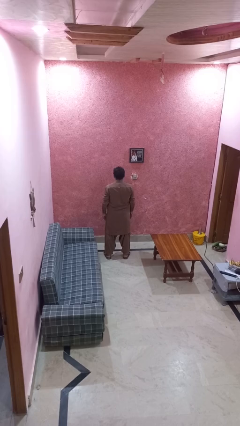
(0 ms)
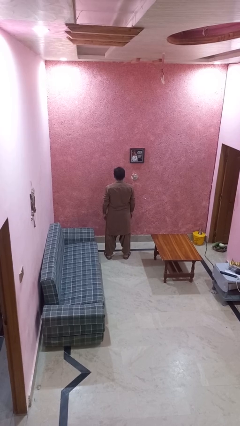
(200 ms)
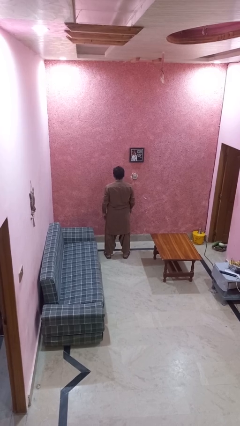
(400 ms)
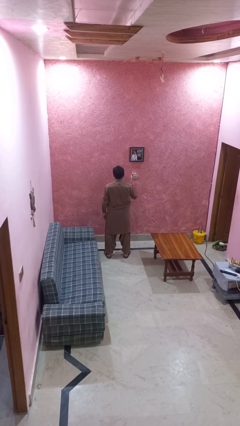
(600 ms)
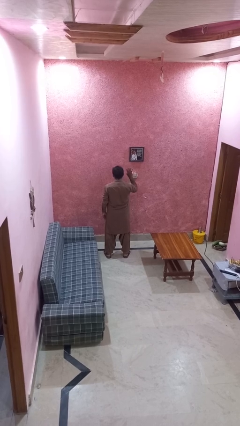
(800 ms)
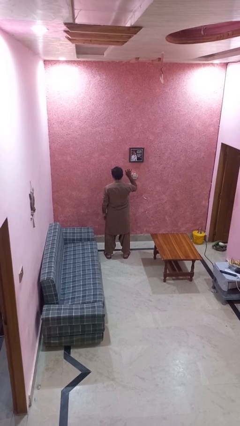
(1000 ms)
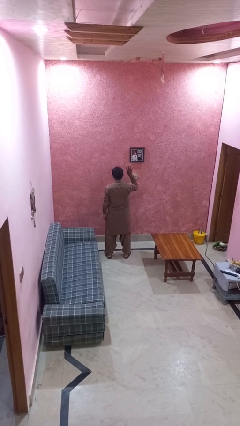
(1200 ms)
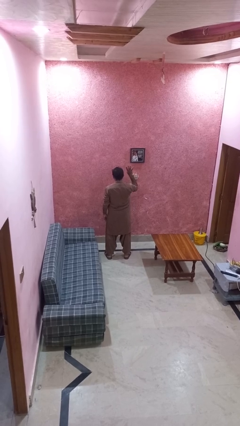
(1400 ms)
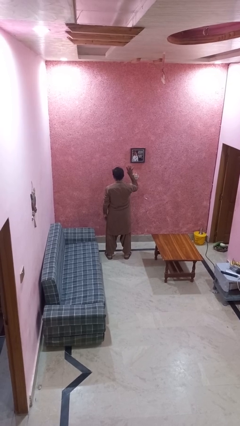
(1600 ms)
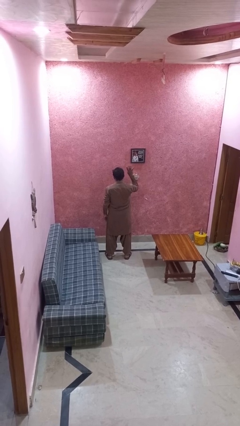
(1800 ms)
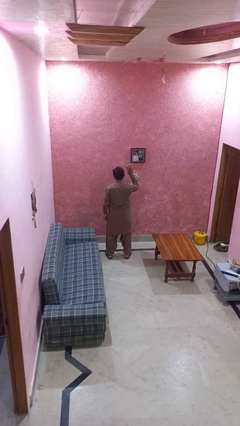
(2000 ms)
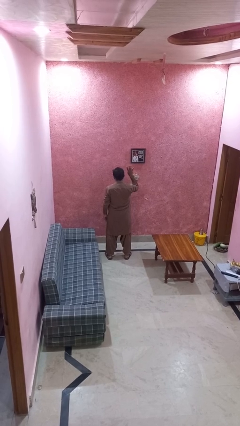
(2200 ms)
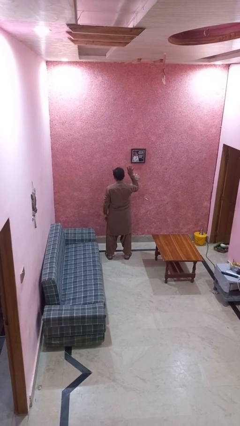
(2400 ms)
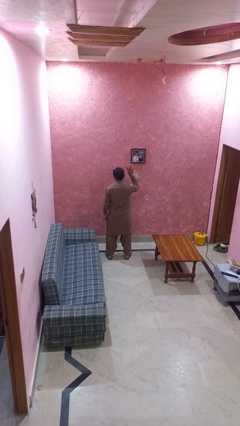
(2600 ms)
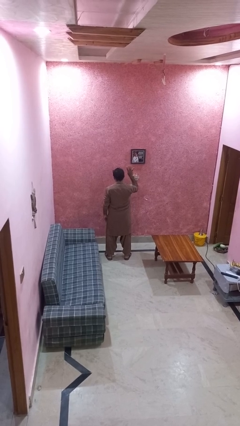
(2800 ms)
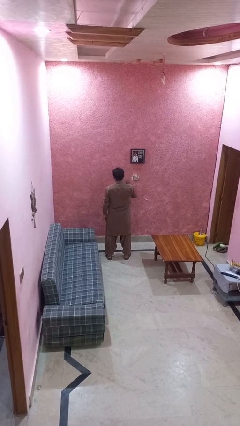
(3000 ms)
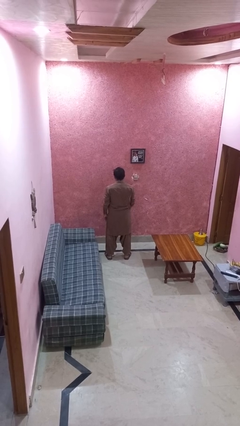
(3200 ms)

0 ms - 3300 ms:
person gestures number four

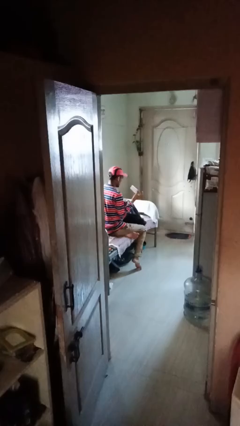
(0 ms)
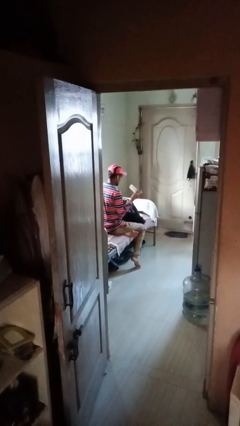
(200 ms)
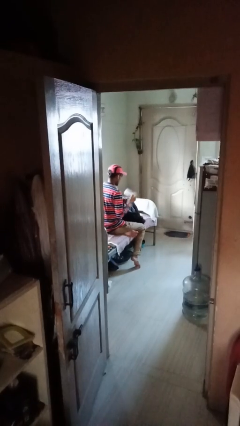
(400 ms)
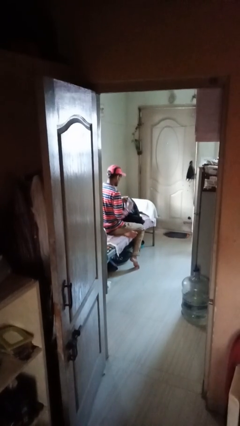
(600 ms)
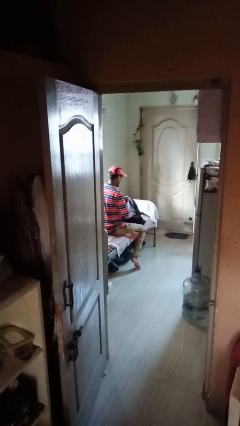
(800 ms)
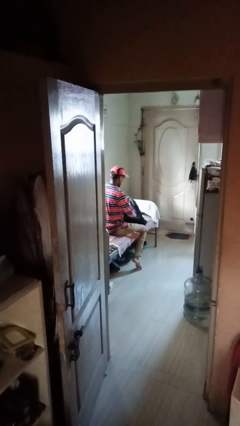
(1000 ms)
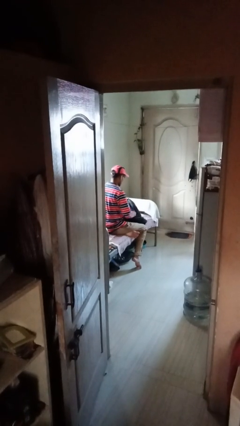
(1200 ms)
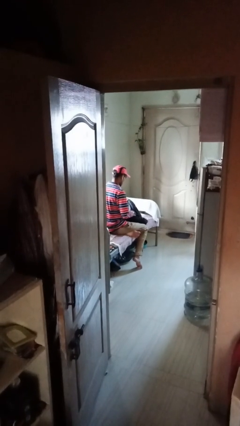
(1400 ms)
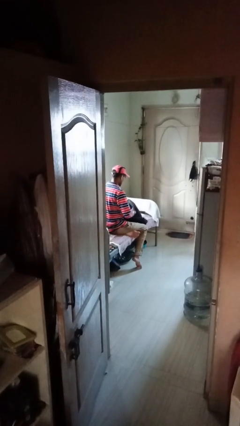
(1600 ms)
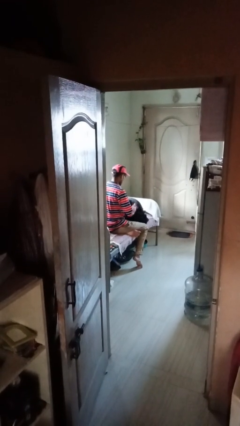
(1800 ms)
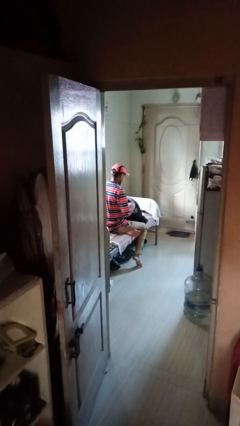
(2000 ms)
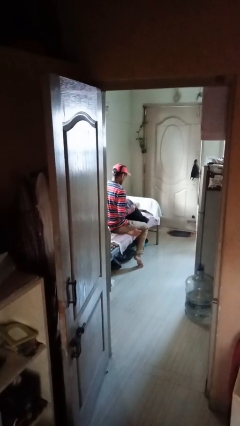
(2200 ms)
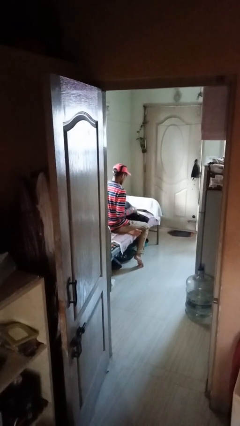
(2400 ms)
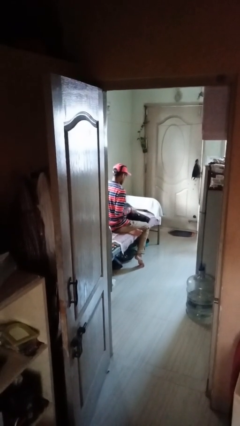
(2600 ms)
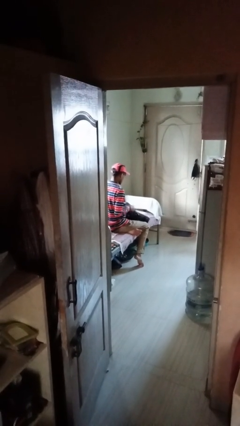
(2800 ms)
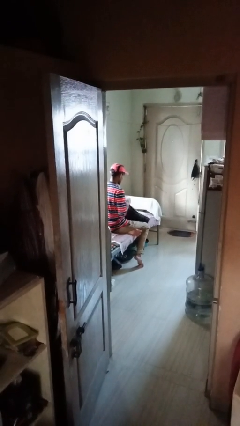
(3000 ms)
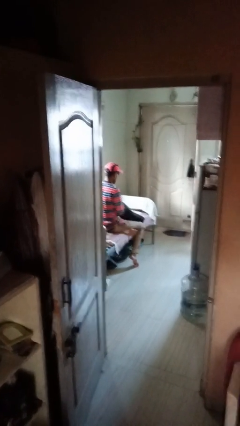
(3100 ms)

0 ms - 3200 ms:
person puts object into backpack

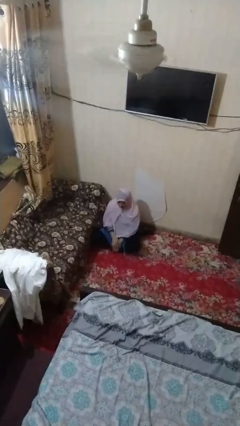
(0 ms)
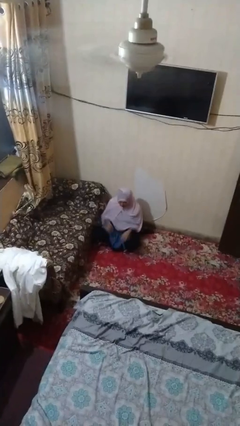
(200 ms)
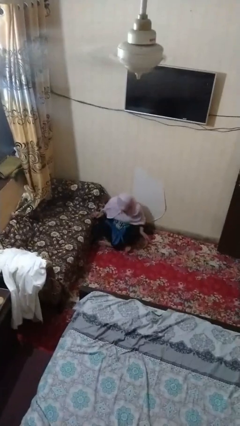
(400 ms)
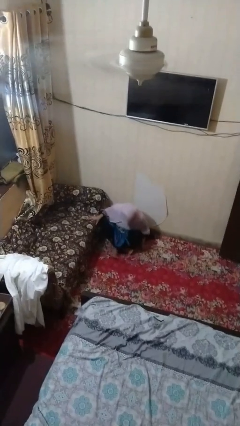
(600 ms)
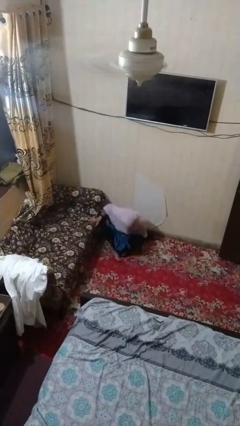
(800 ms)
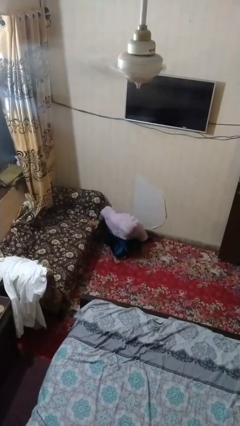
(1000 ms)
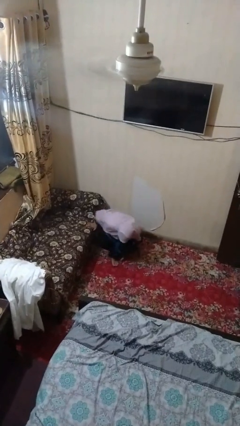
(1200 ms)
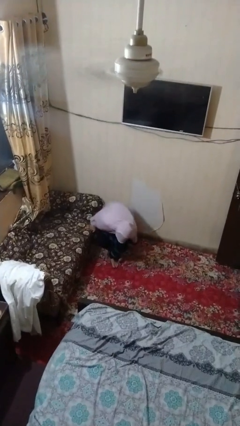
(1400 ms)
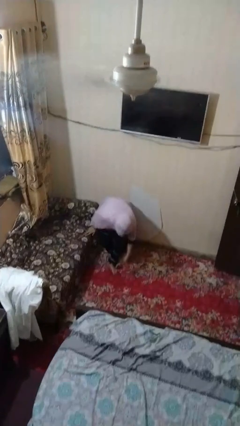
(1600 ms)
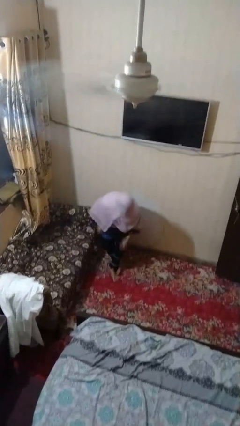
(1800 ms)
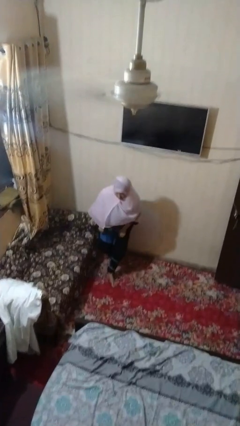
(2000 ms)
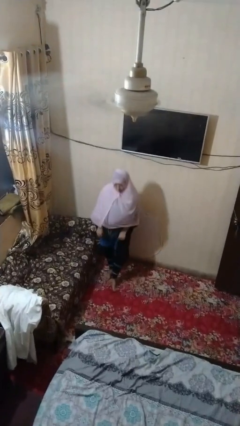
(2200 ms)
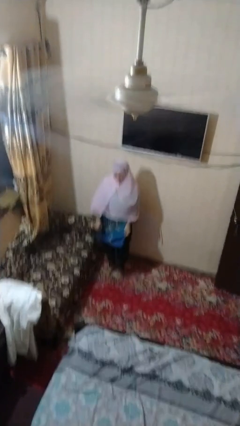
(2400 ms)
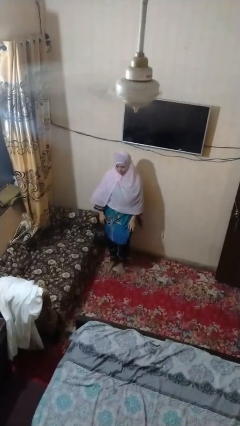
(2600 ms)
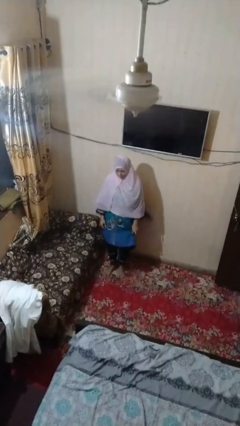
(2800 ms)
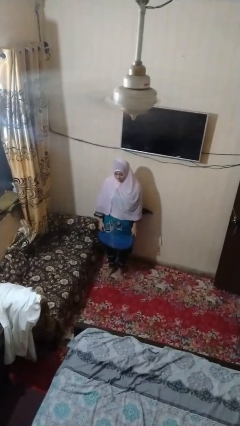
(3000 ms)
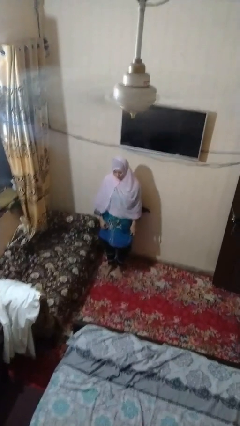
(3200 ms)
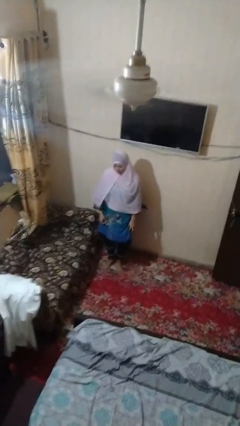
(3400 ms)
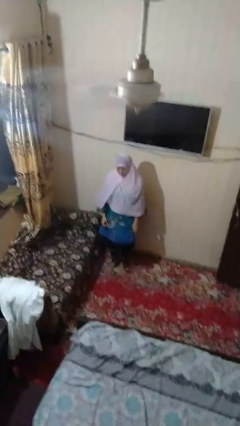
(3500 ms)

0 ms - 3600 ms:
person stands up from floor

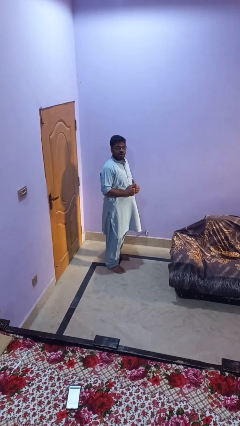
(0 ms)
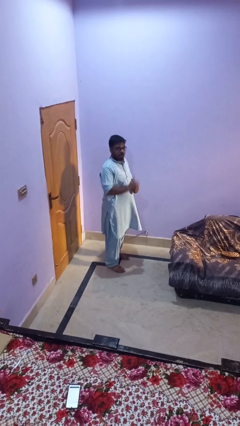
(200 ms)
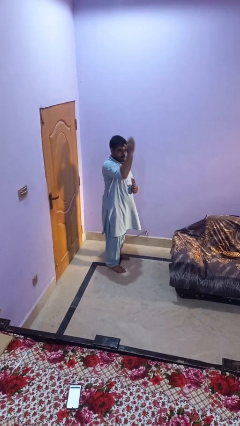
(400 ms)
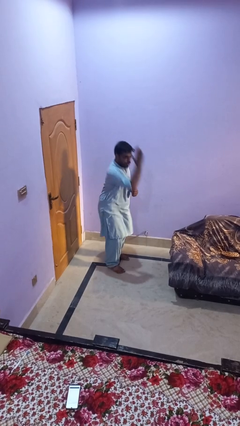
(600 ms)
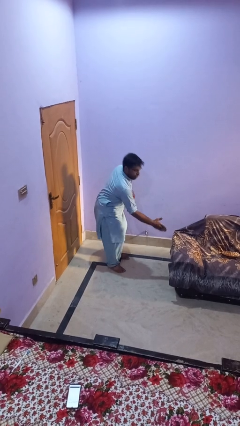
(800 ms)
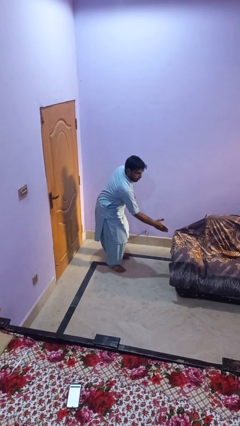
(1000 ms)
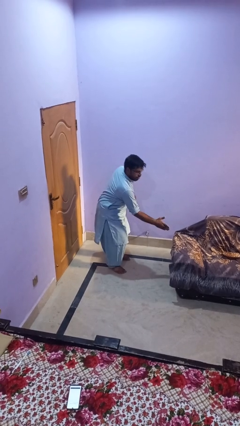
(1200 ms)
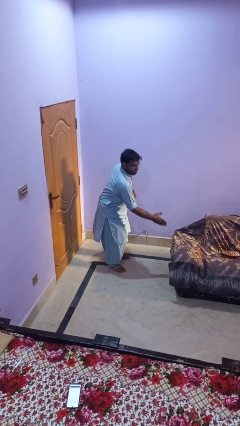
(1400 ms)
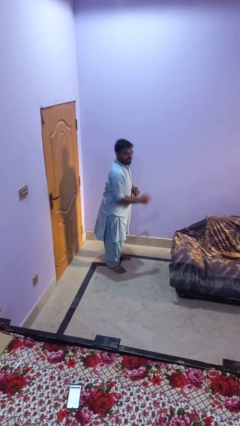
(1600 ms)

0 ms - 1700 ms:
person karate chop

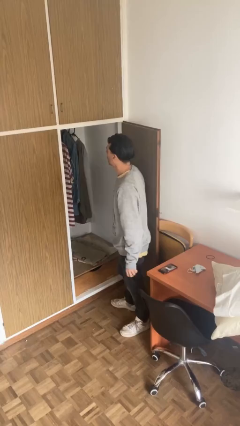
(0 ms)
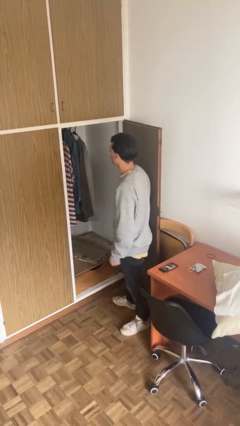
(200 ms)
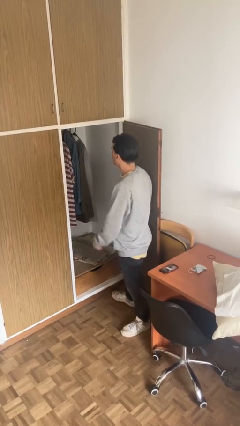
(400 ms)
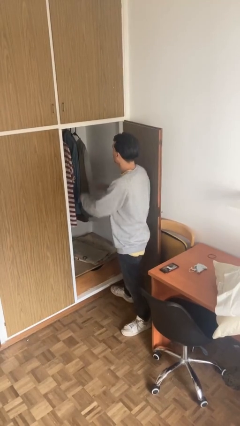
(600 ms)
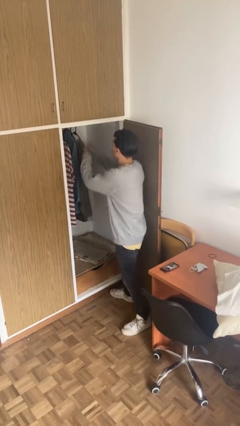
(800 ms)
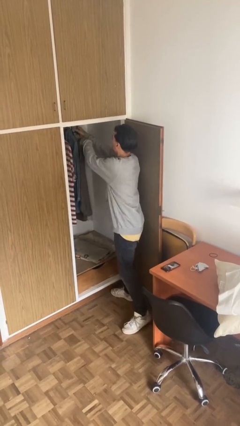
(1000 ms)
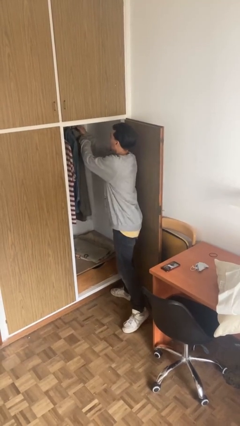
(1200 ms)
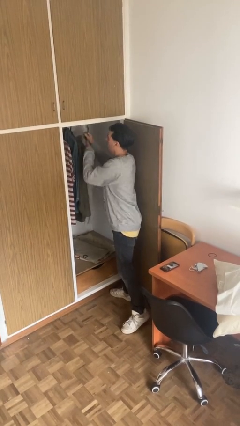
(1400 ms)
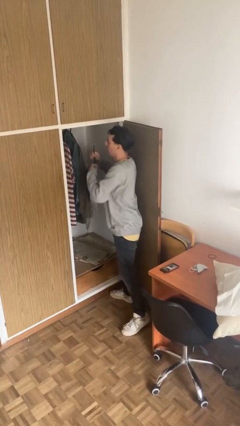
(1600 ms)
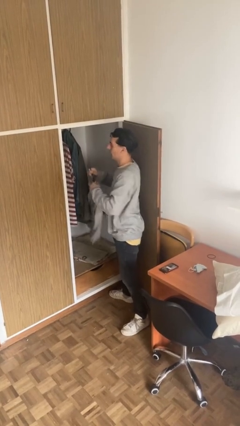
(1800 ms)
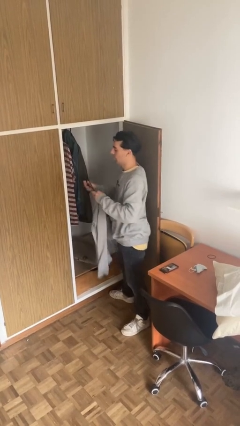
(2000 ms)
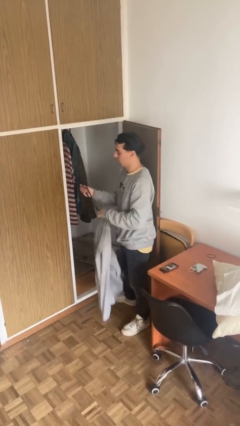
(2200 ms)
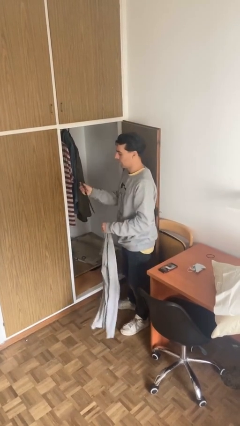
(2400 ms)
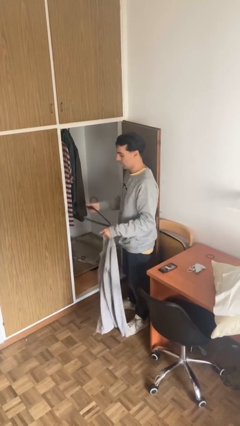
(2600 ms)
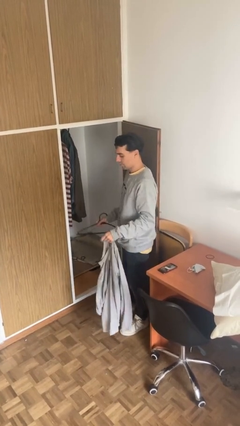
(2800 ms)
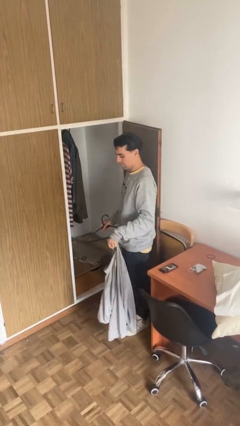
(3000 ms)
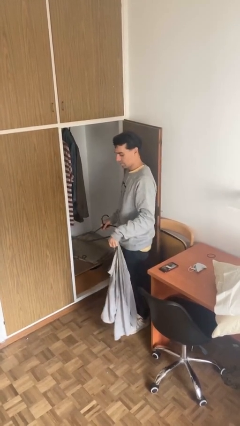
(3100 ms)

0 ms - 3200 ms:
person takes clothes from closet

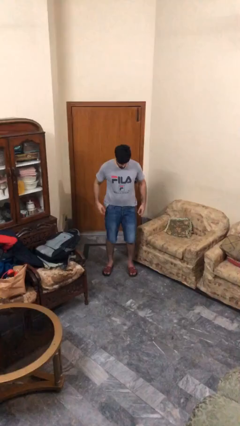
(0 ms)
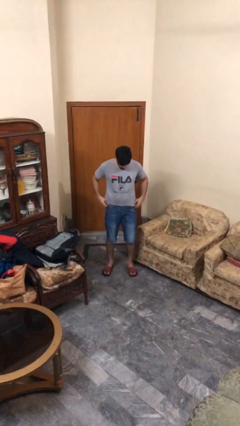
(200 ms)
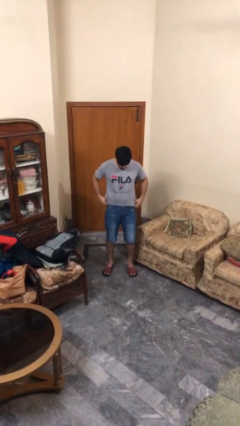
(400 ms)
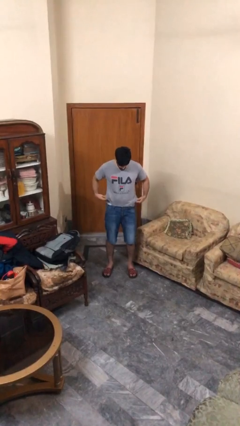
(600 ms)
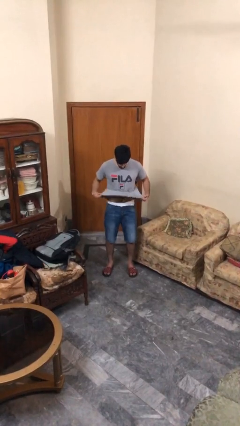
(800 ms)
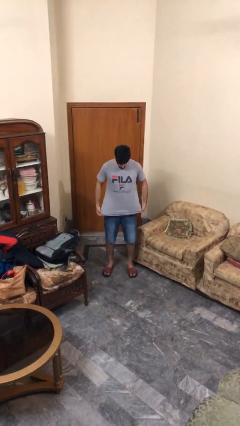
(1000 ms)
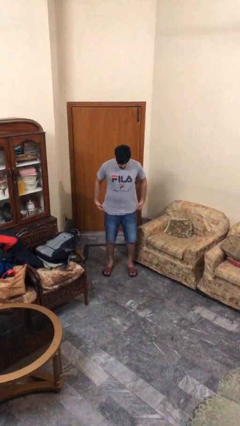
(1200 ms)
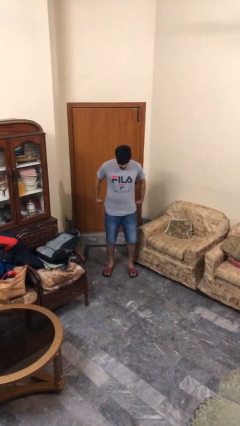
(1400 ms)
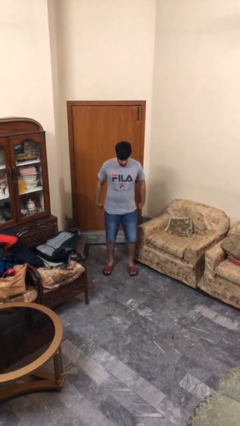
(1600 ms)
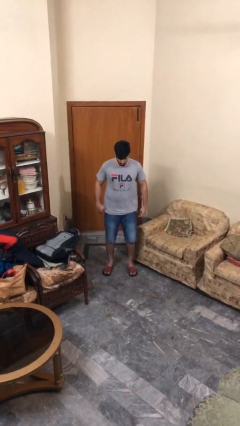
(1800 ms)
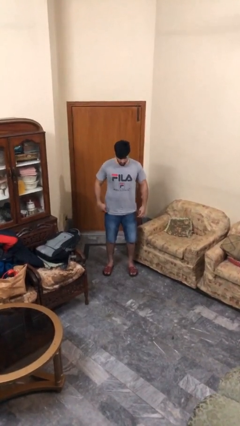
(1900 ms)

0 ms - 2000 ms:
person untucks shirt

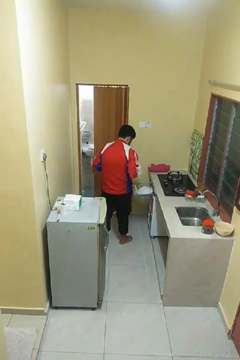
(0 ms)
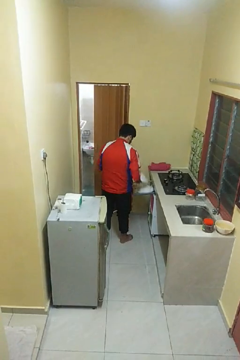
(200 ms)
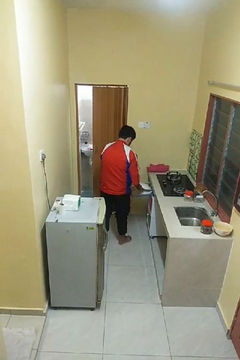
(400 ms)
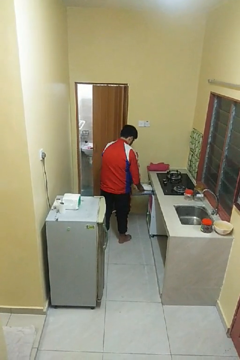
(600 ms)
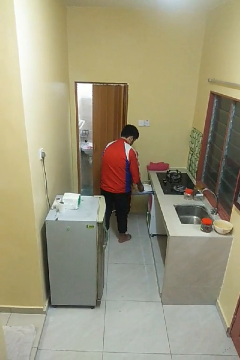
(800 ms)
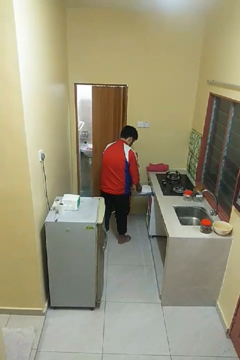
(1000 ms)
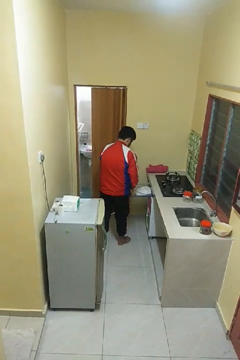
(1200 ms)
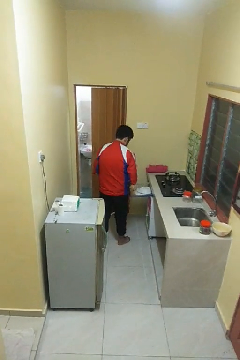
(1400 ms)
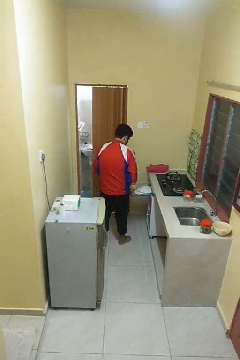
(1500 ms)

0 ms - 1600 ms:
person puts object into kitchen drawer
